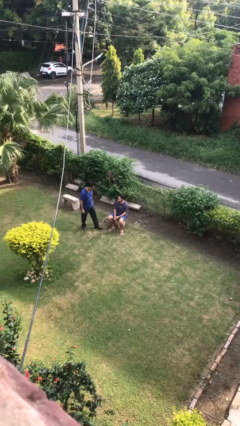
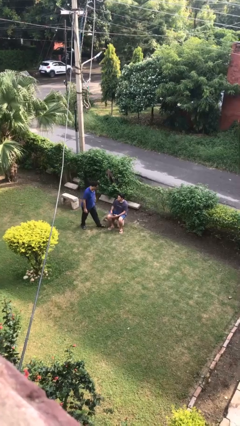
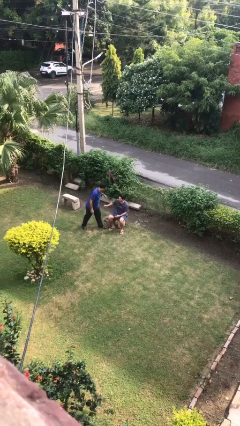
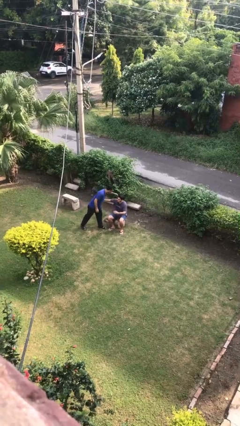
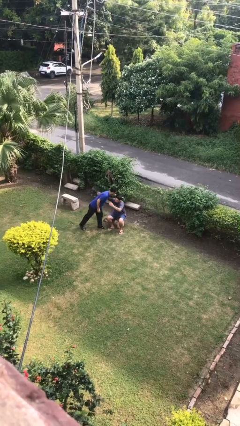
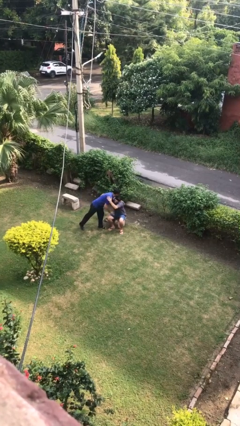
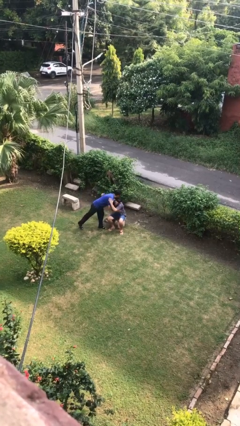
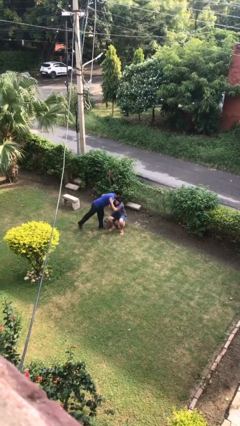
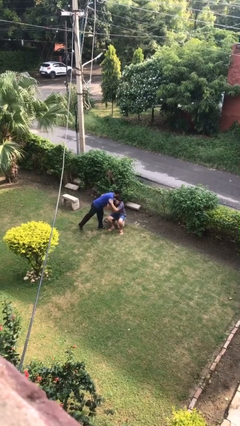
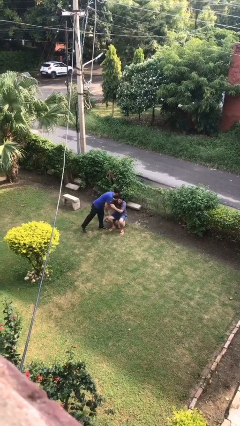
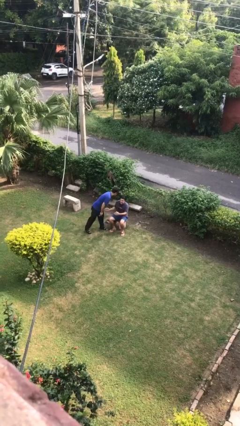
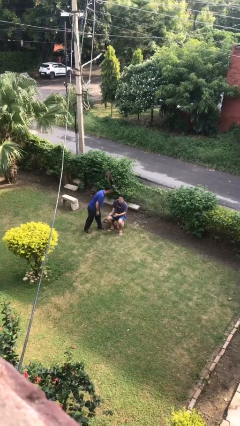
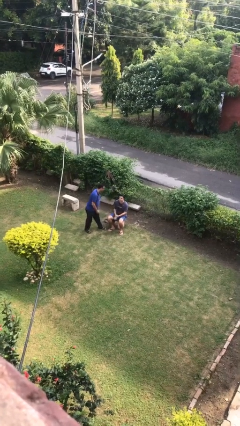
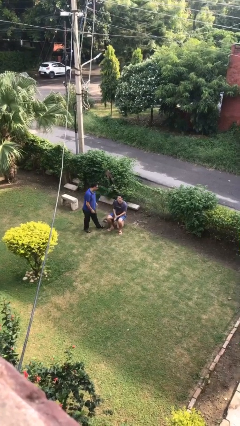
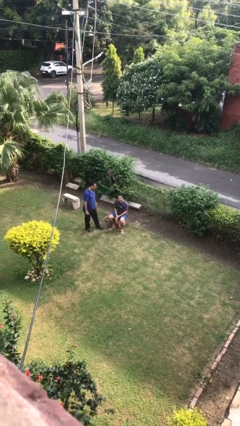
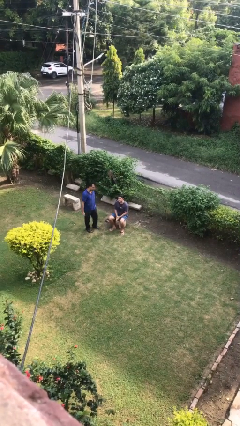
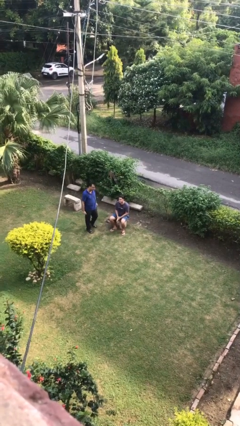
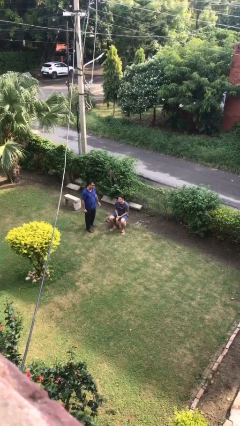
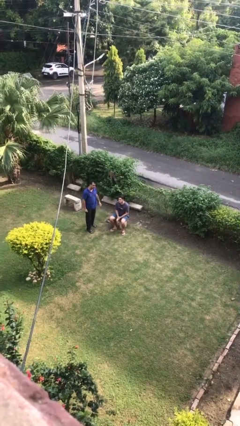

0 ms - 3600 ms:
person embraces person

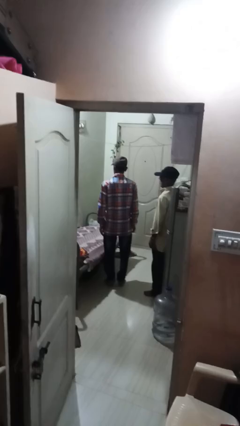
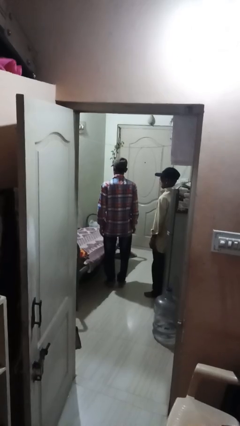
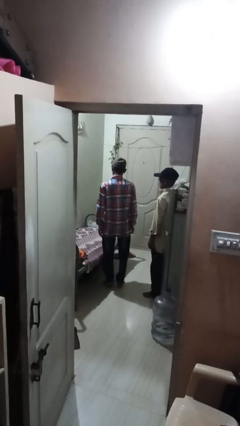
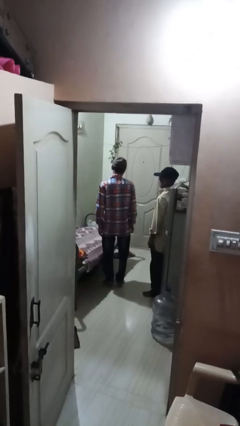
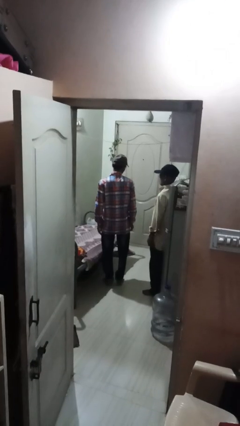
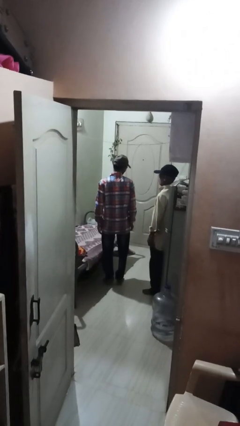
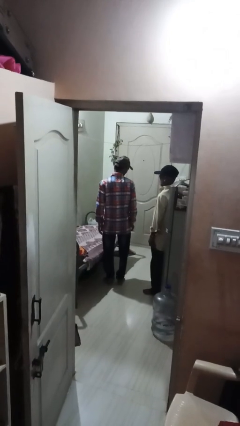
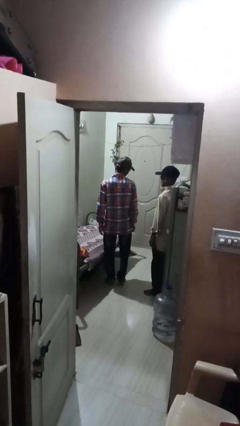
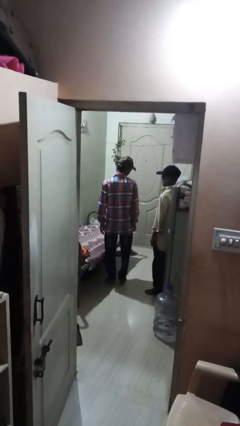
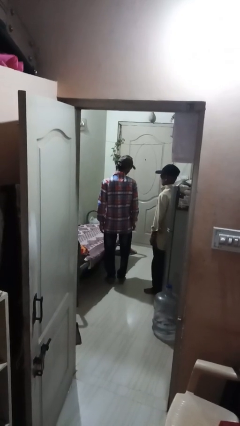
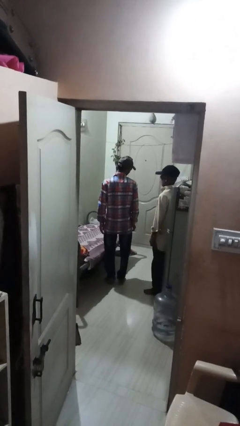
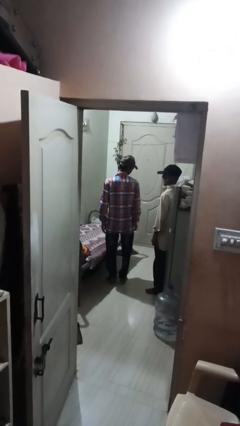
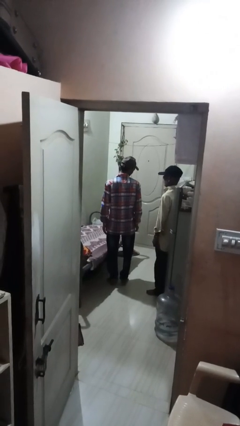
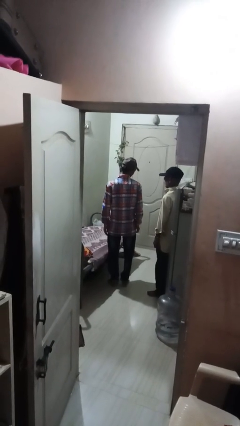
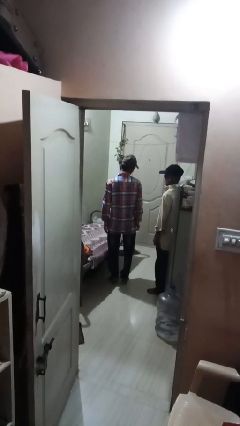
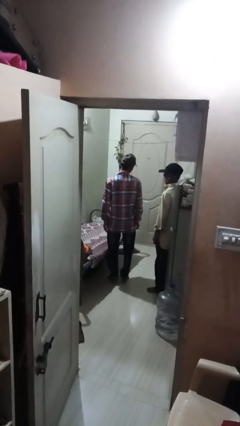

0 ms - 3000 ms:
person looks over shoulder

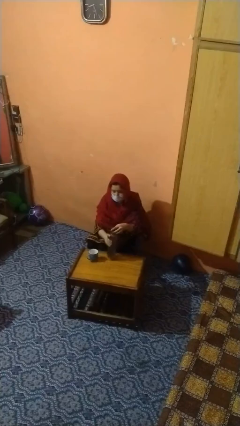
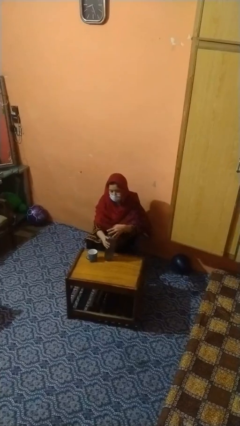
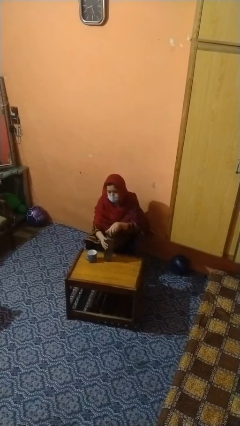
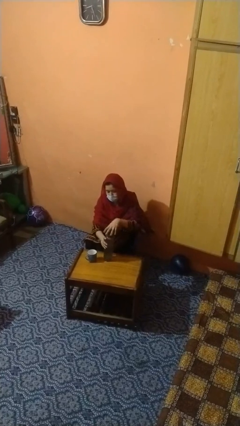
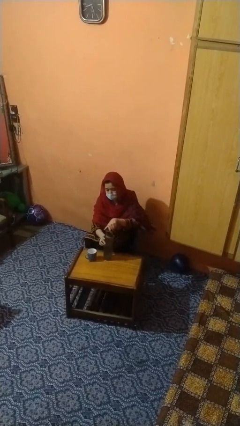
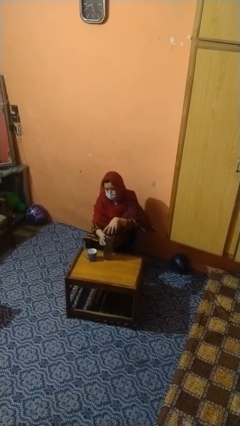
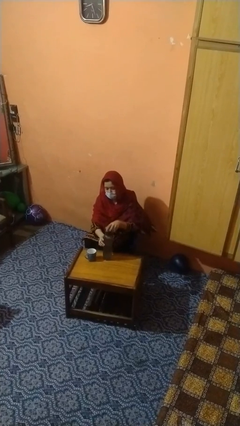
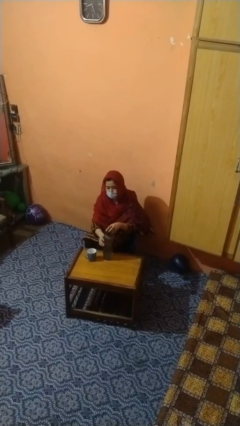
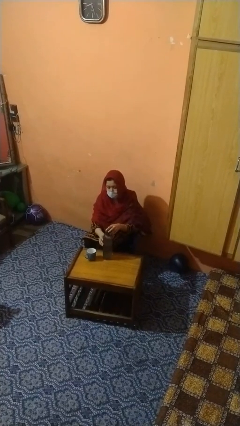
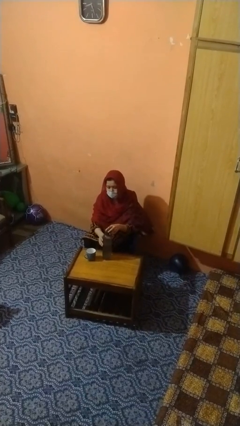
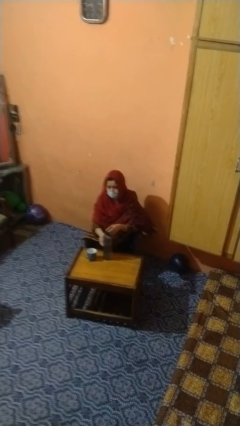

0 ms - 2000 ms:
person screws lid to bottle

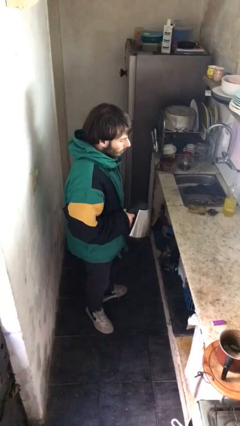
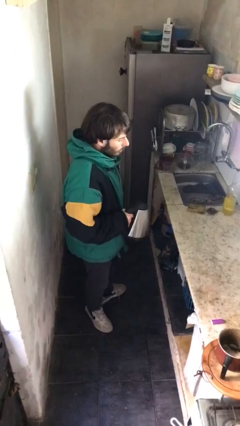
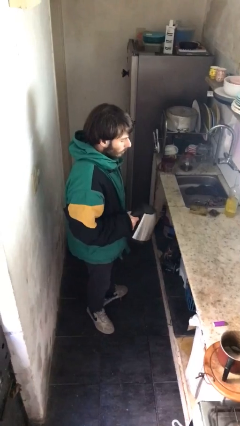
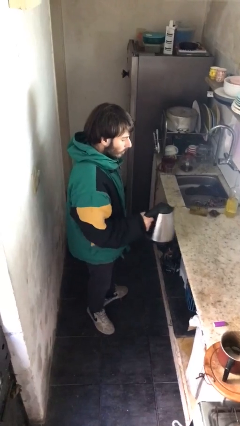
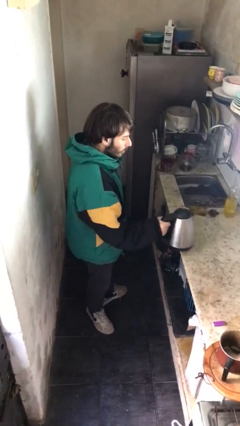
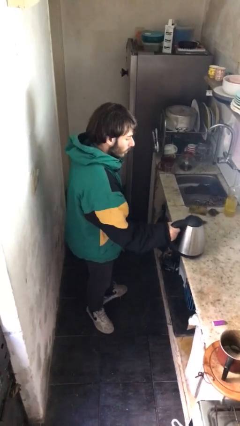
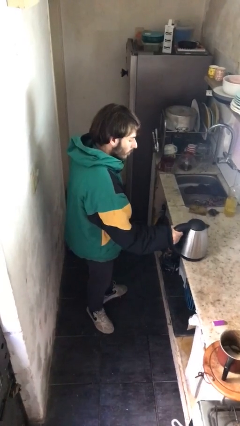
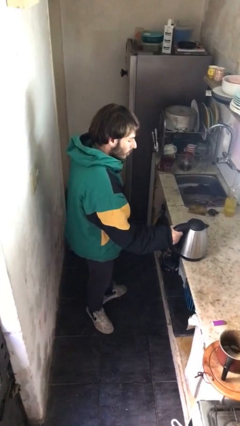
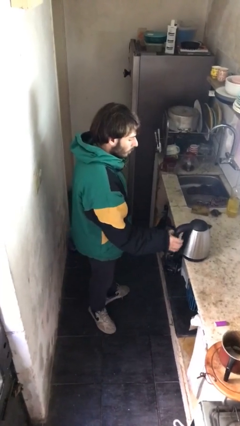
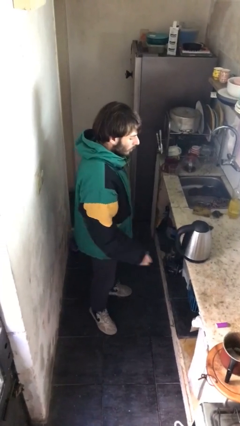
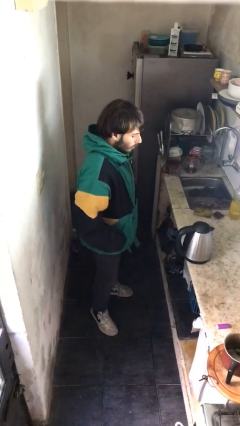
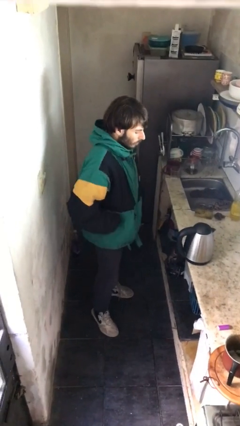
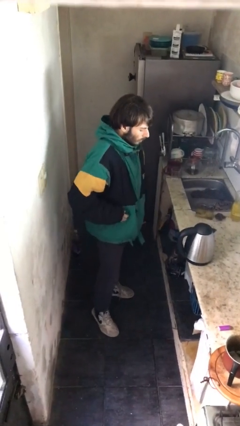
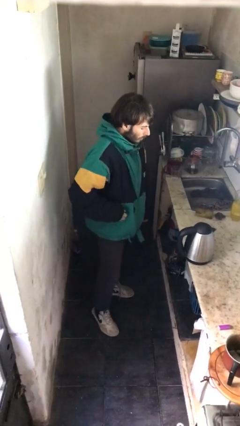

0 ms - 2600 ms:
person puts down object on countertop

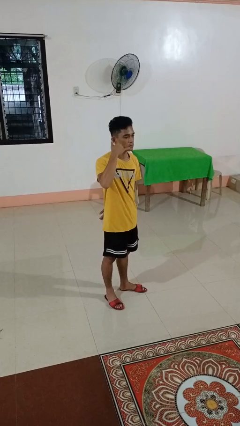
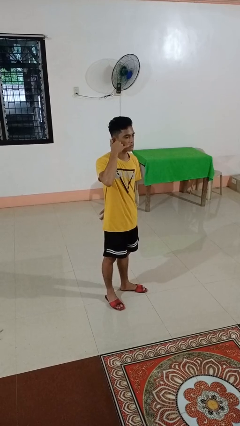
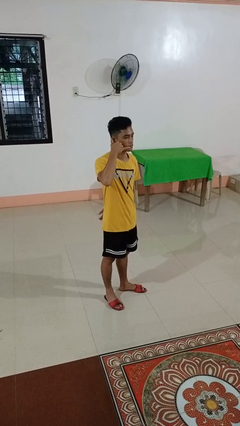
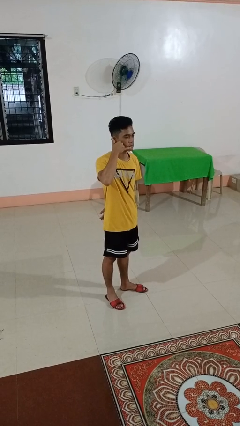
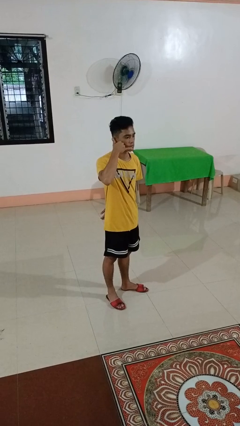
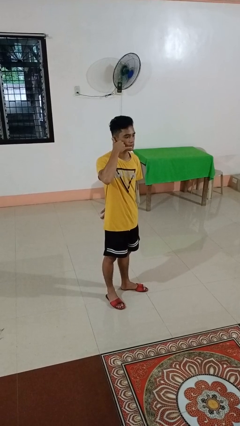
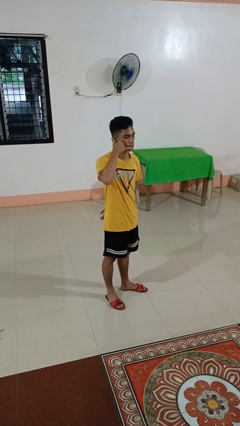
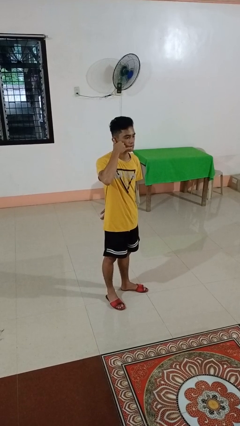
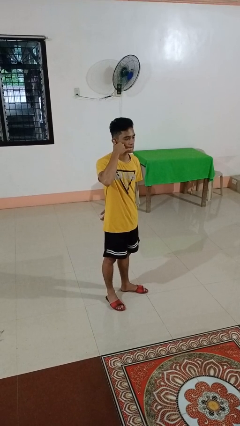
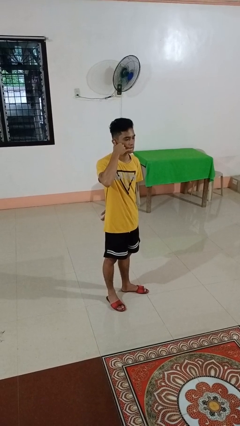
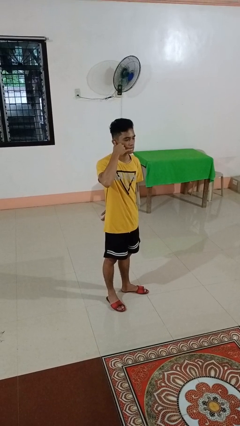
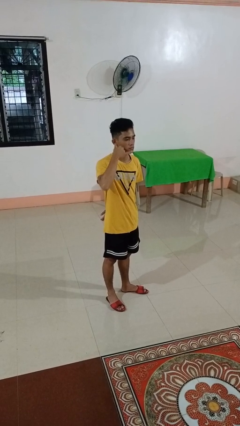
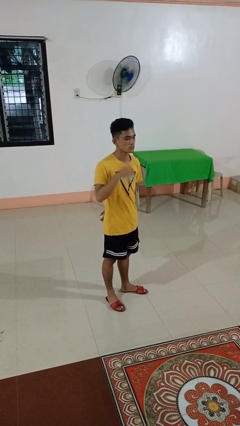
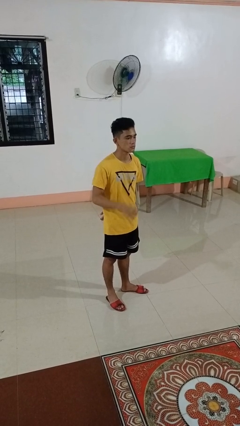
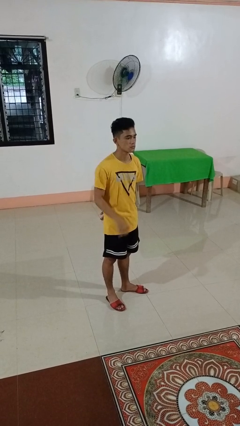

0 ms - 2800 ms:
person gestures call me

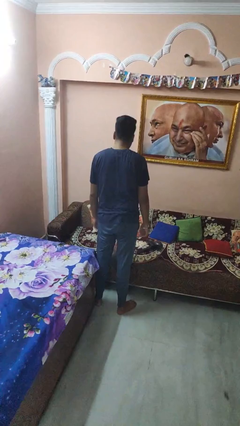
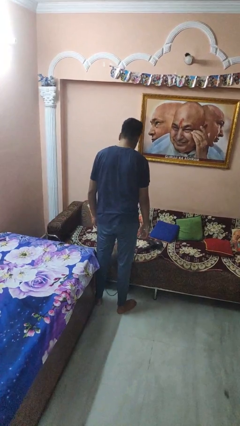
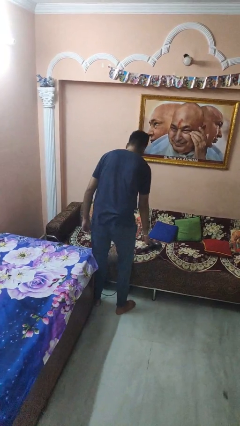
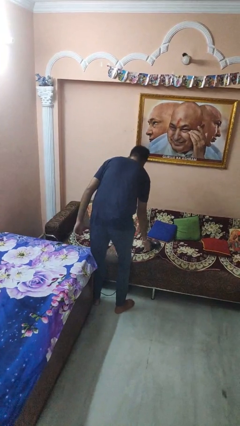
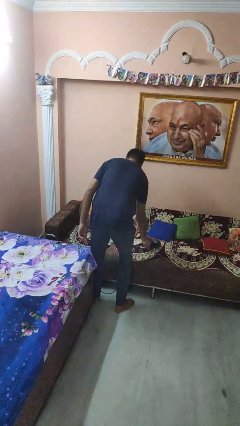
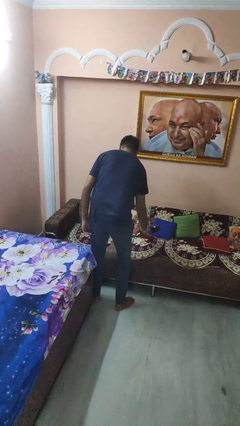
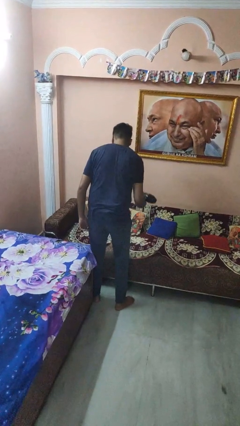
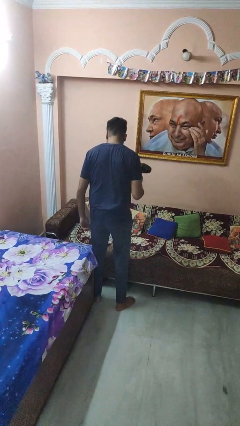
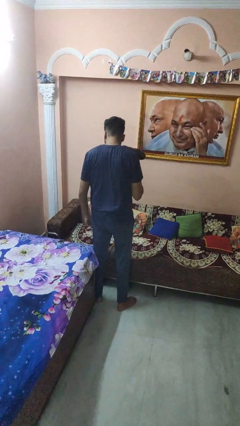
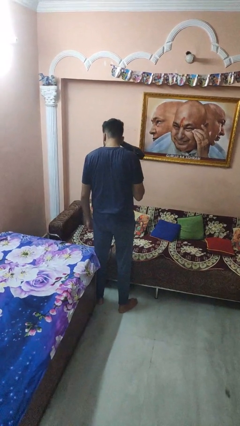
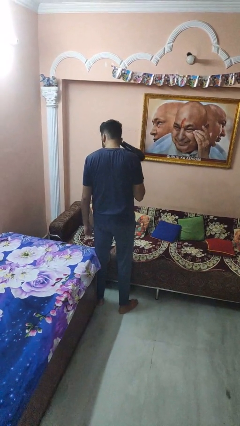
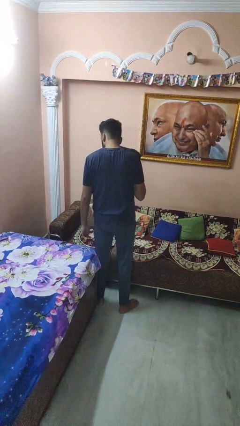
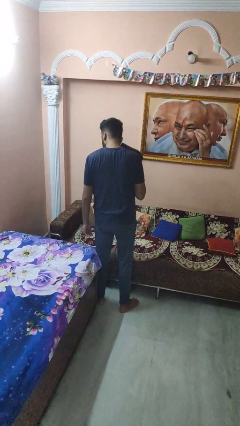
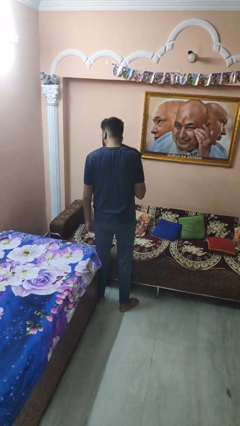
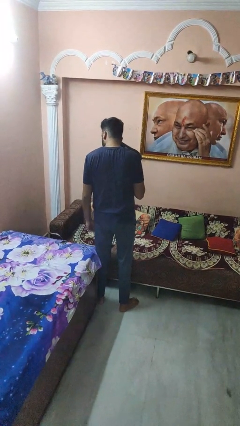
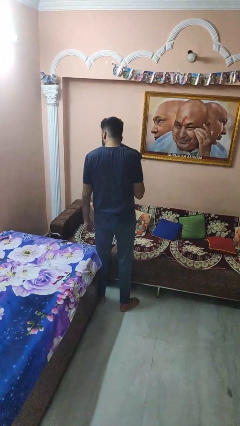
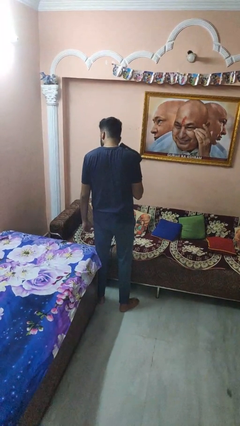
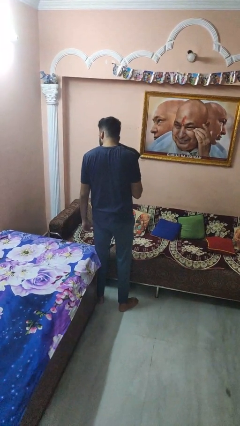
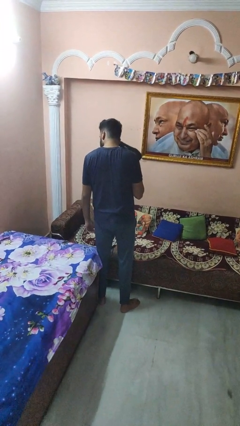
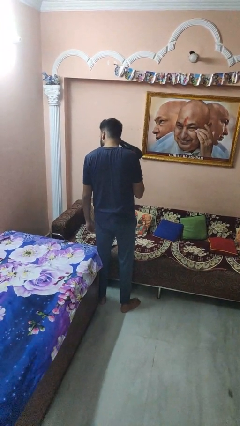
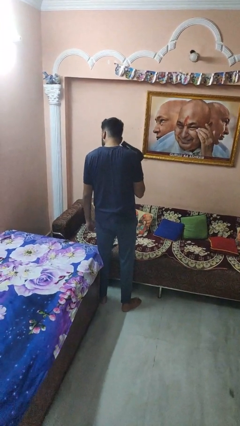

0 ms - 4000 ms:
person dries hair with hairdryer
